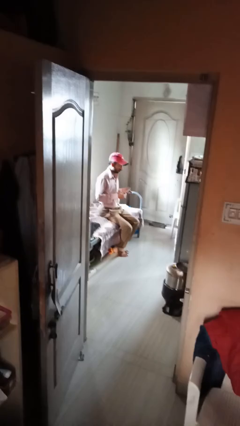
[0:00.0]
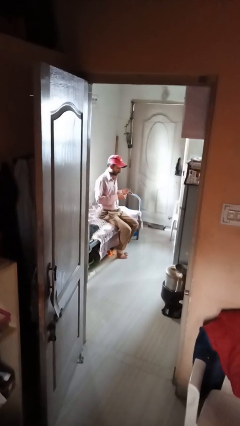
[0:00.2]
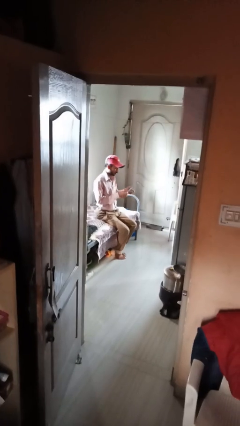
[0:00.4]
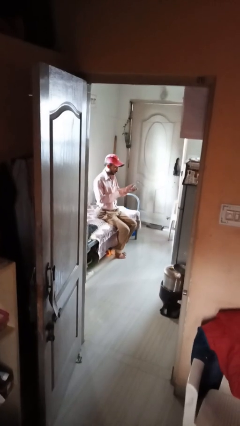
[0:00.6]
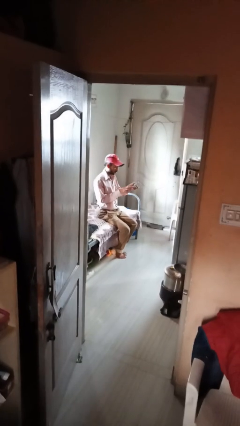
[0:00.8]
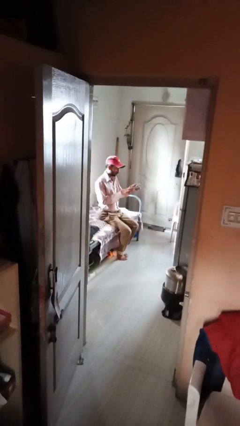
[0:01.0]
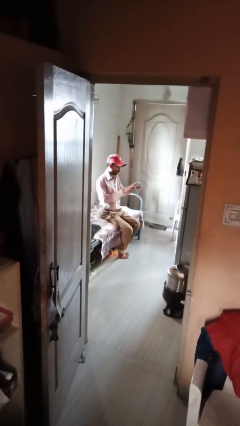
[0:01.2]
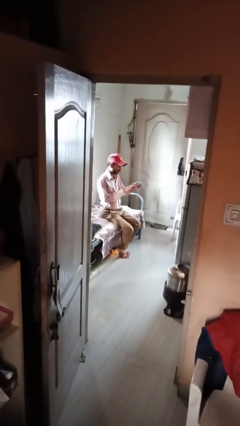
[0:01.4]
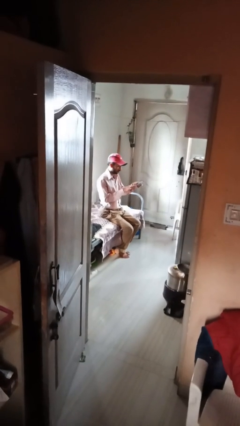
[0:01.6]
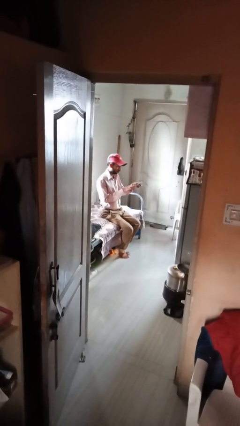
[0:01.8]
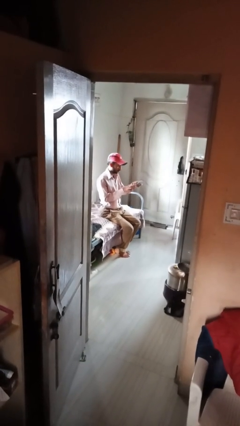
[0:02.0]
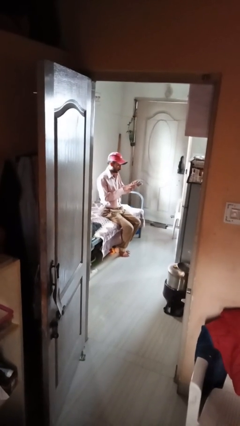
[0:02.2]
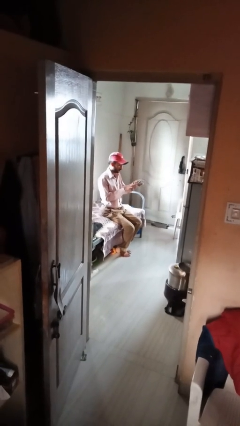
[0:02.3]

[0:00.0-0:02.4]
person clips fingernails

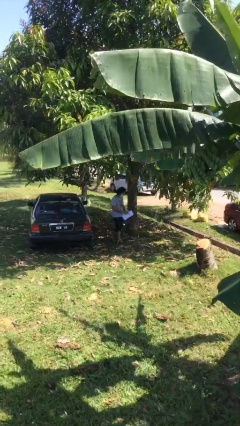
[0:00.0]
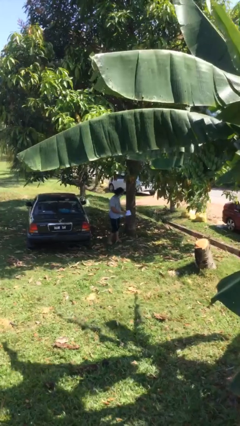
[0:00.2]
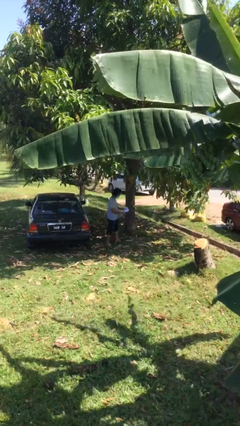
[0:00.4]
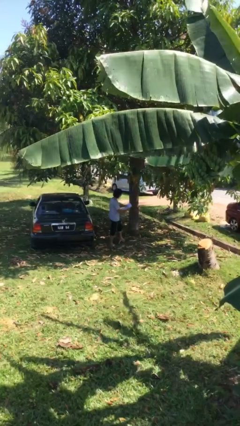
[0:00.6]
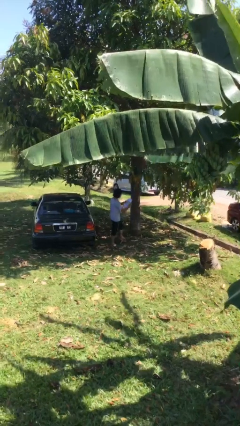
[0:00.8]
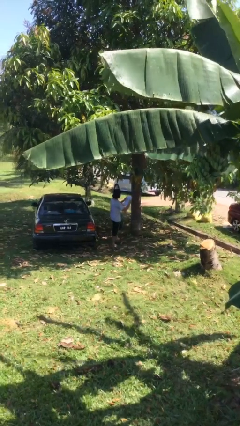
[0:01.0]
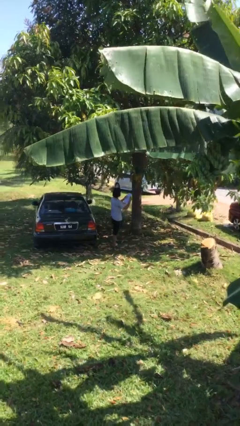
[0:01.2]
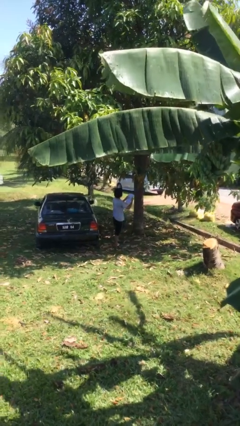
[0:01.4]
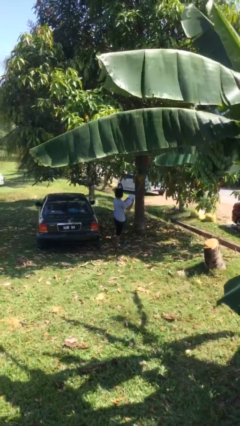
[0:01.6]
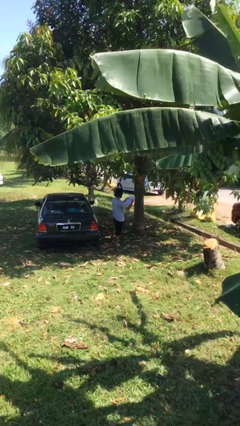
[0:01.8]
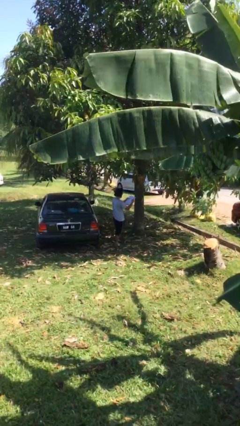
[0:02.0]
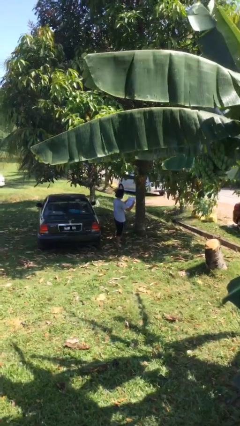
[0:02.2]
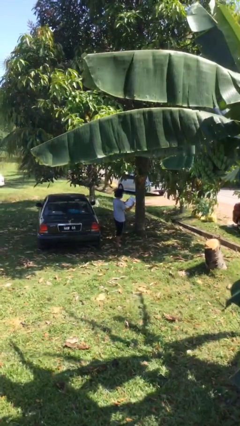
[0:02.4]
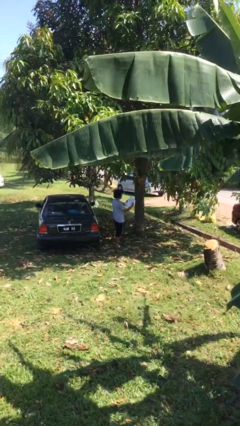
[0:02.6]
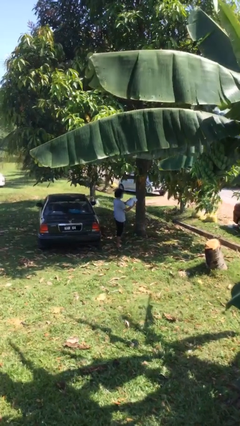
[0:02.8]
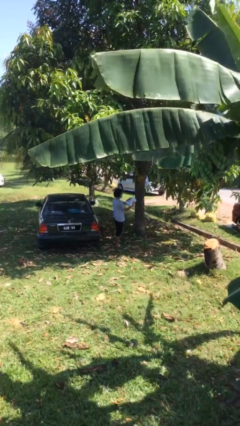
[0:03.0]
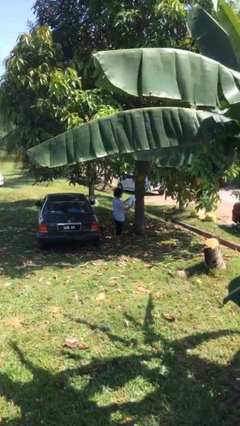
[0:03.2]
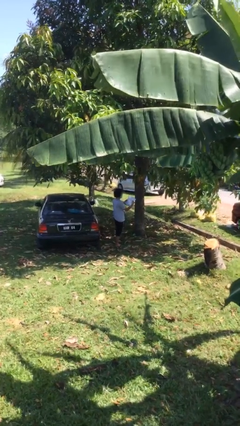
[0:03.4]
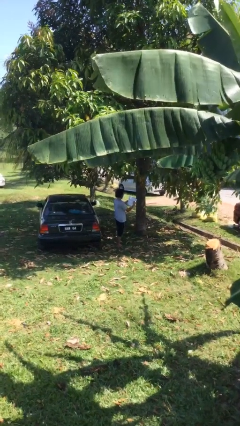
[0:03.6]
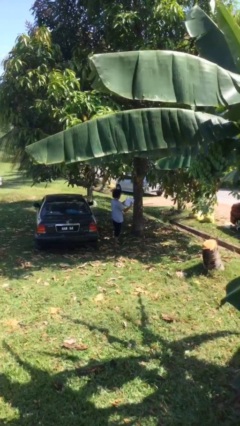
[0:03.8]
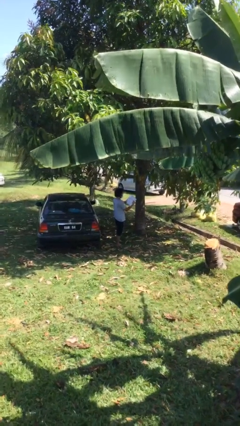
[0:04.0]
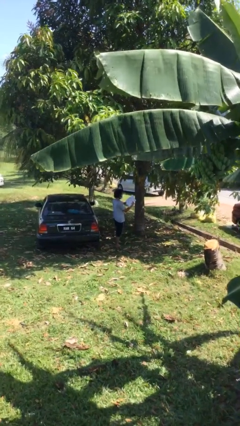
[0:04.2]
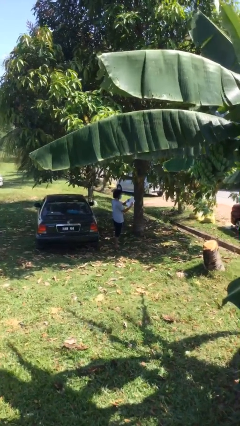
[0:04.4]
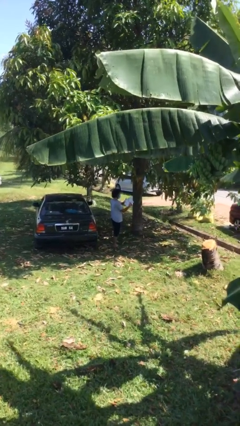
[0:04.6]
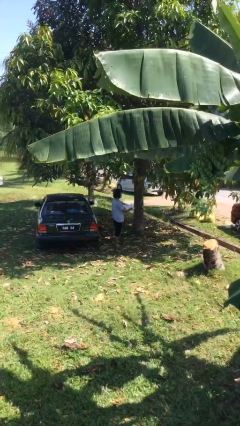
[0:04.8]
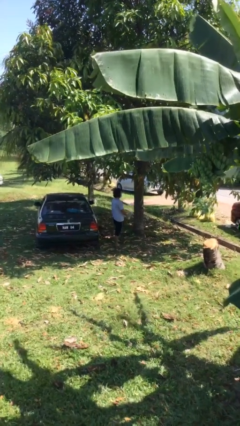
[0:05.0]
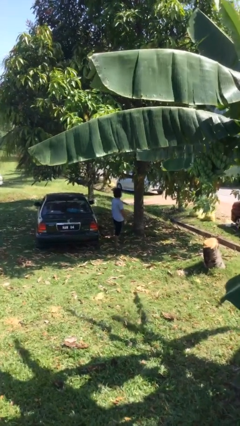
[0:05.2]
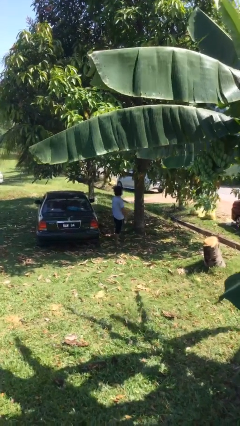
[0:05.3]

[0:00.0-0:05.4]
person reads document

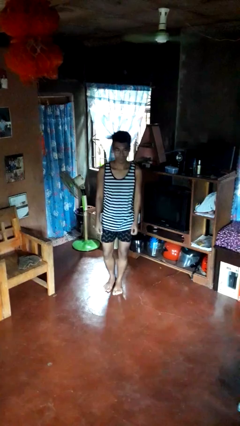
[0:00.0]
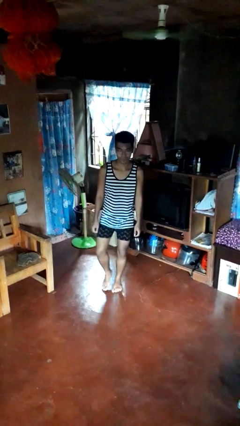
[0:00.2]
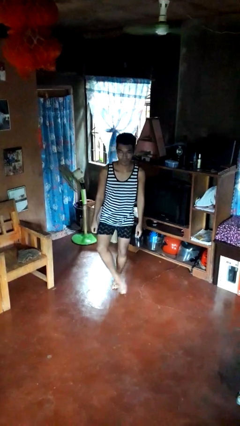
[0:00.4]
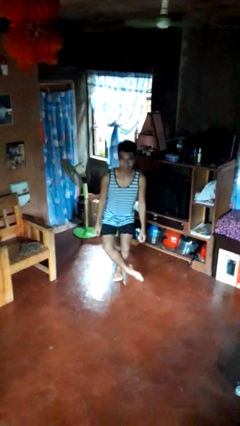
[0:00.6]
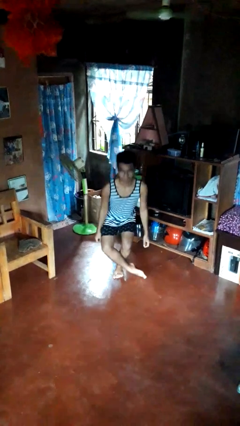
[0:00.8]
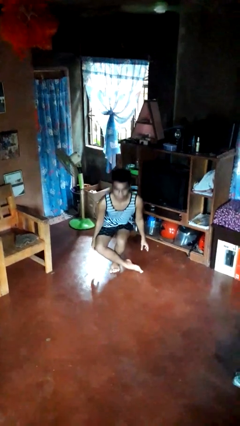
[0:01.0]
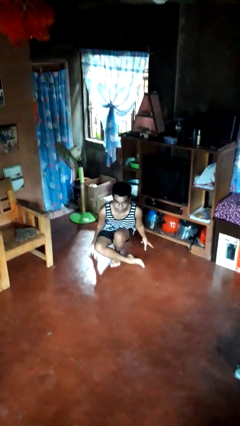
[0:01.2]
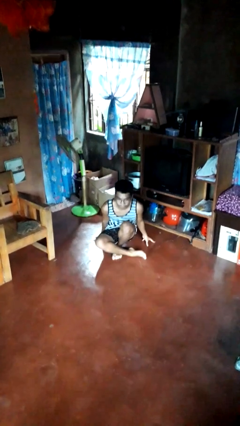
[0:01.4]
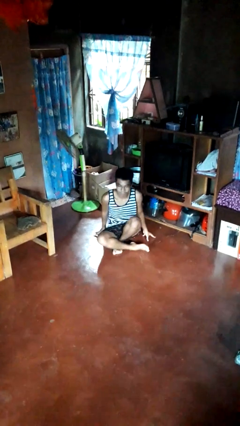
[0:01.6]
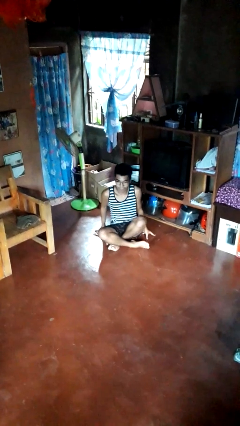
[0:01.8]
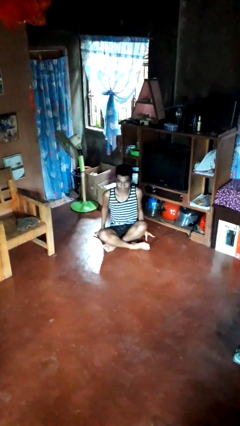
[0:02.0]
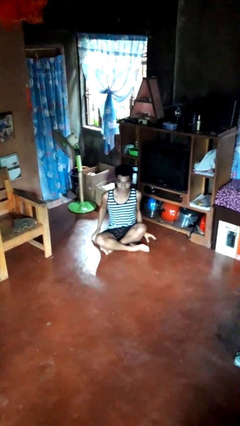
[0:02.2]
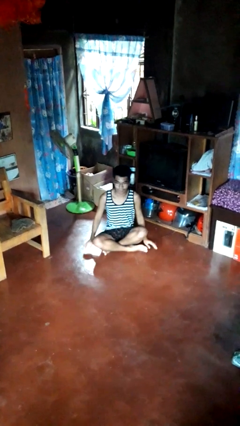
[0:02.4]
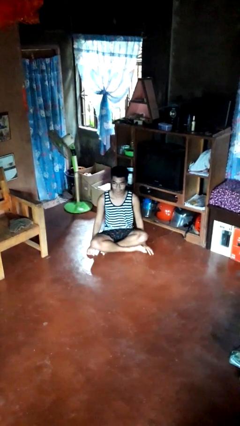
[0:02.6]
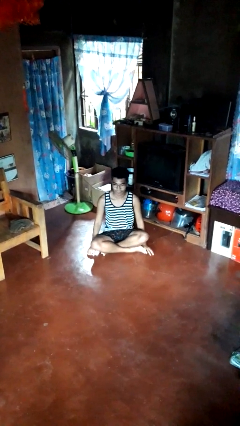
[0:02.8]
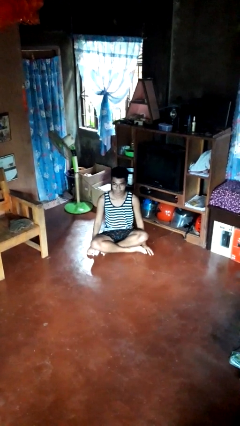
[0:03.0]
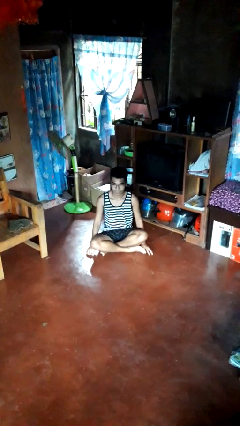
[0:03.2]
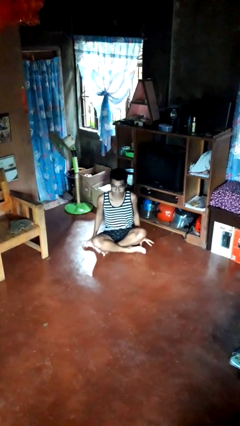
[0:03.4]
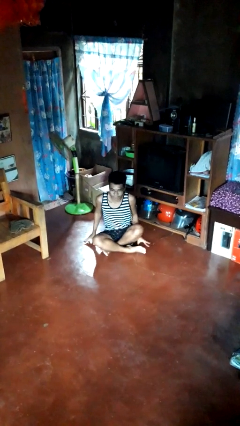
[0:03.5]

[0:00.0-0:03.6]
person sits crisscross

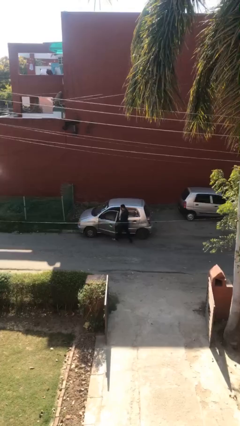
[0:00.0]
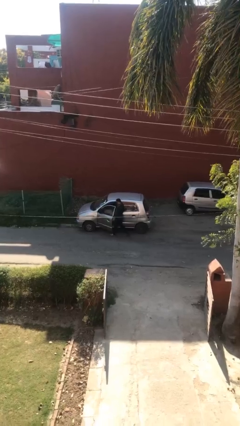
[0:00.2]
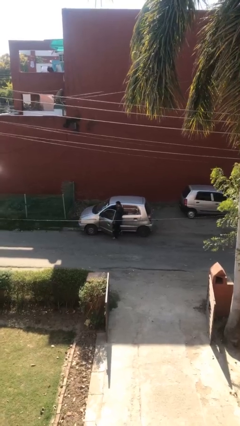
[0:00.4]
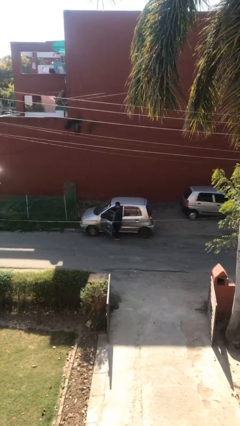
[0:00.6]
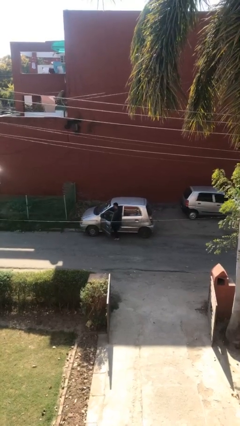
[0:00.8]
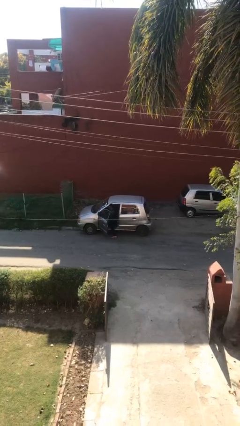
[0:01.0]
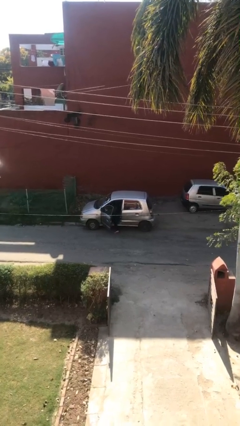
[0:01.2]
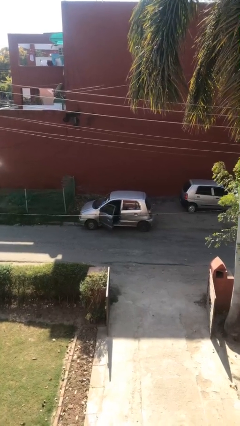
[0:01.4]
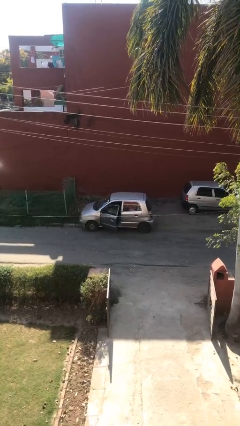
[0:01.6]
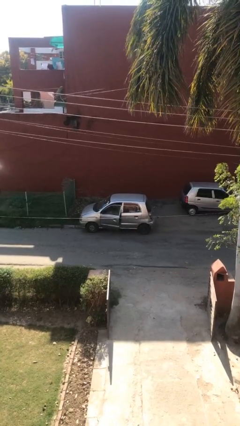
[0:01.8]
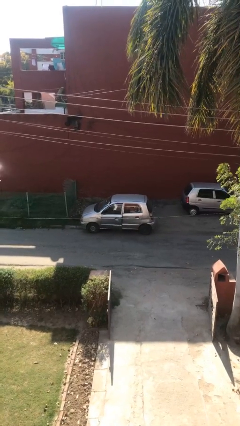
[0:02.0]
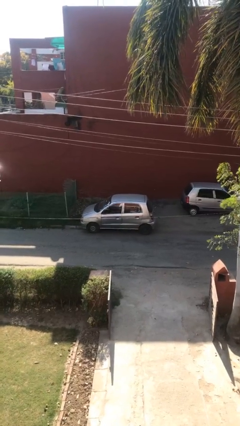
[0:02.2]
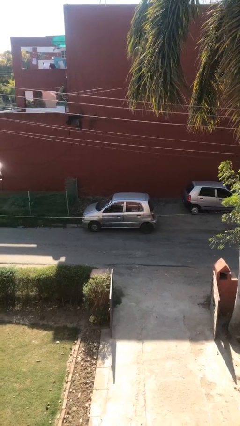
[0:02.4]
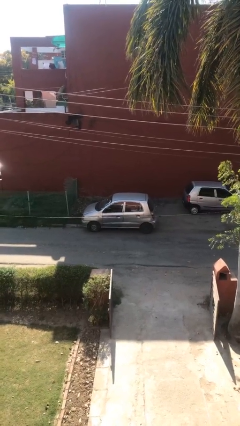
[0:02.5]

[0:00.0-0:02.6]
car picks up person

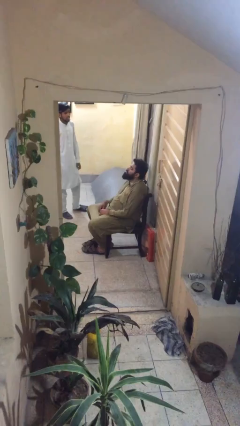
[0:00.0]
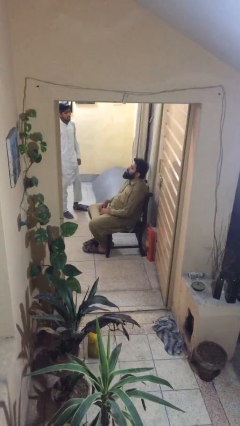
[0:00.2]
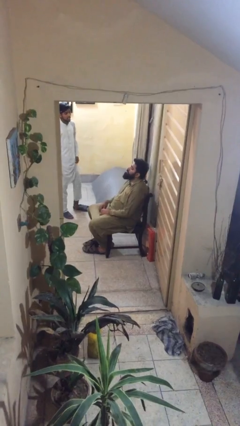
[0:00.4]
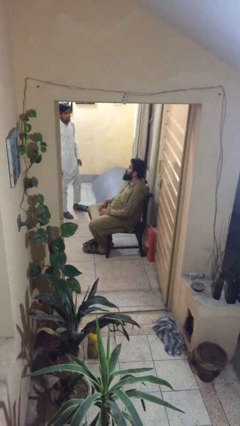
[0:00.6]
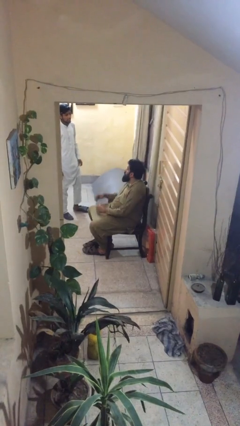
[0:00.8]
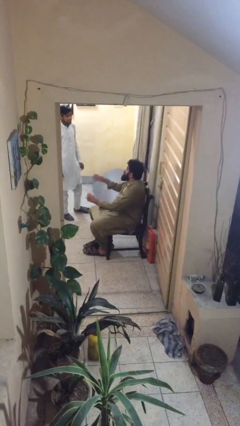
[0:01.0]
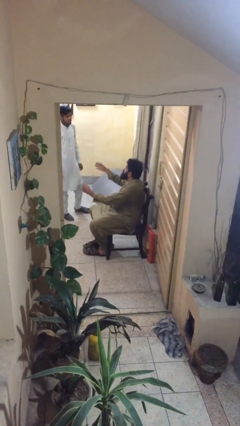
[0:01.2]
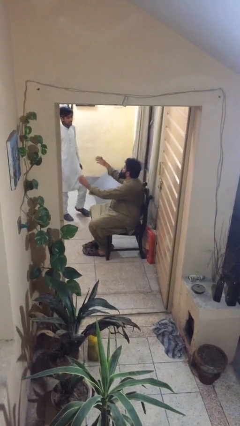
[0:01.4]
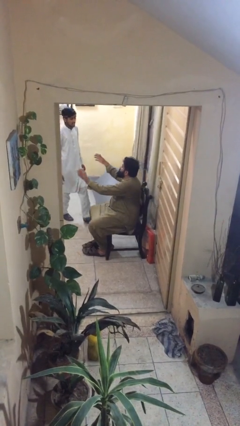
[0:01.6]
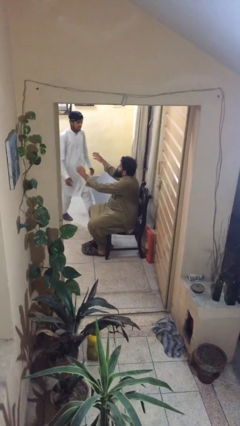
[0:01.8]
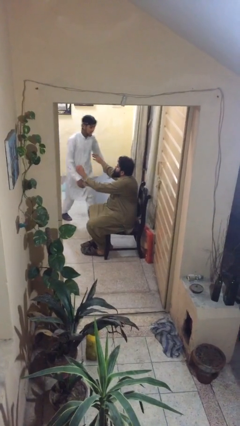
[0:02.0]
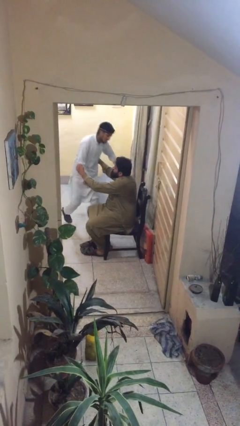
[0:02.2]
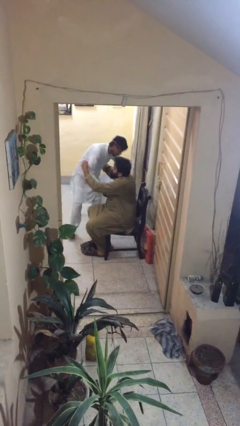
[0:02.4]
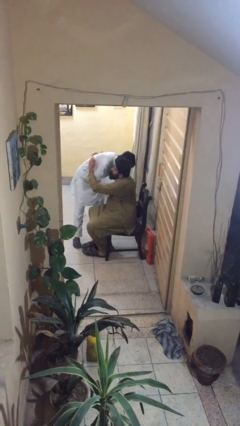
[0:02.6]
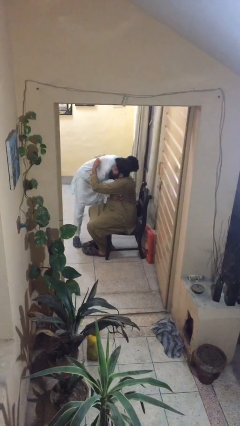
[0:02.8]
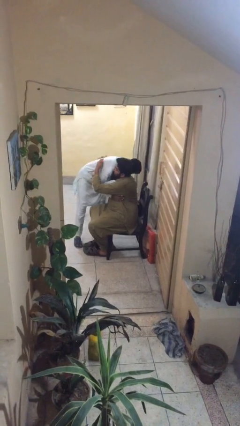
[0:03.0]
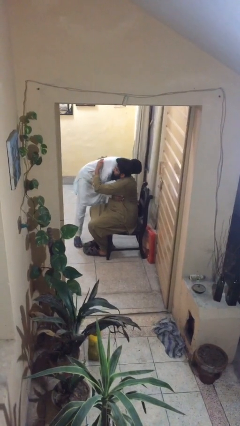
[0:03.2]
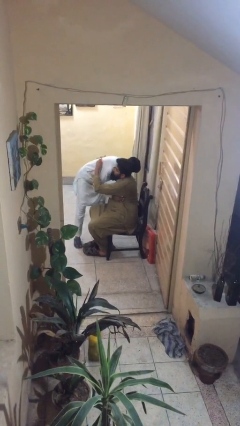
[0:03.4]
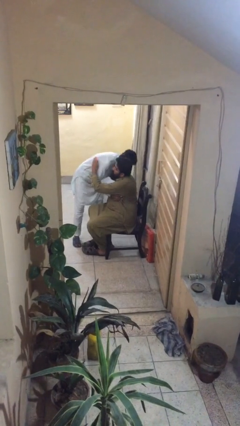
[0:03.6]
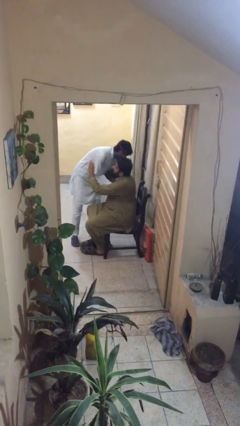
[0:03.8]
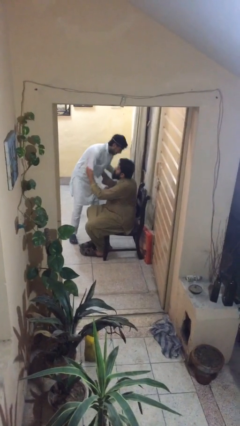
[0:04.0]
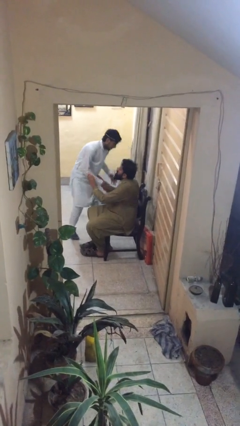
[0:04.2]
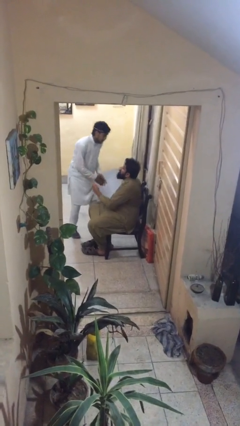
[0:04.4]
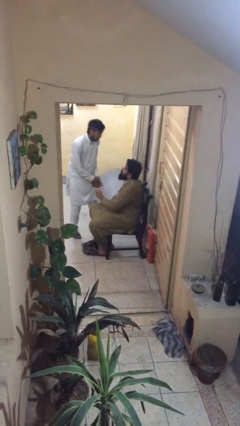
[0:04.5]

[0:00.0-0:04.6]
person embraces person
